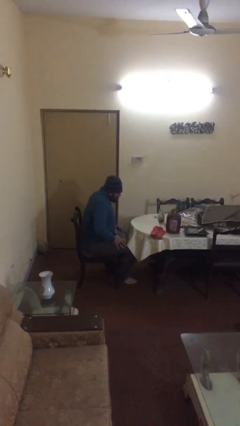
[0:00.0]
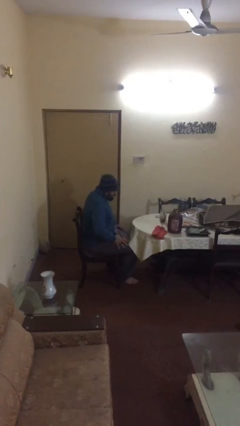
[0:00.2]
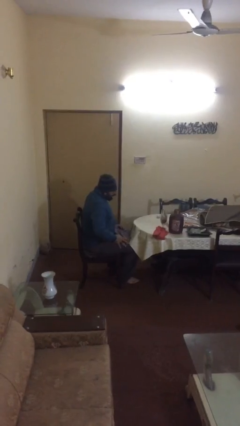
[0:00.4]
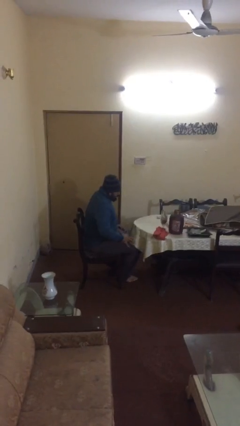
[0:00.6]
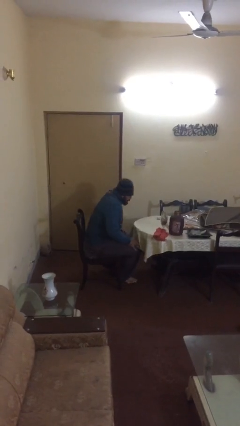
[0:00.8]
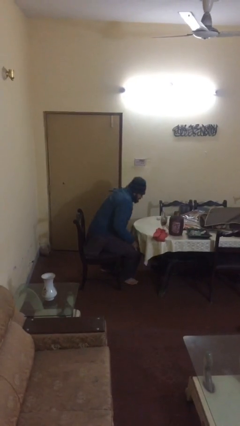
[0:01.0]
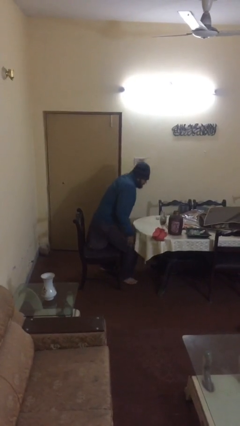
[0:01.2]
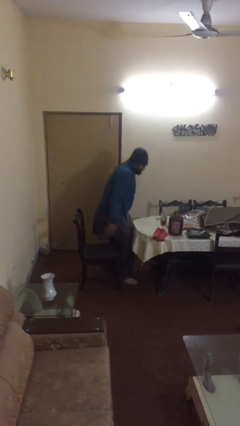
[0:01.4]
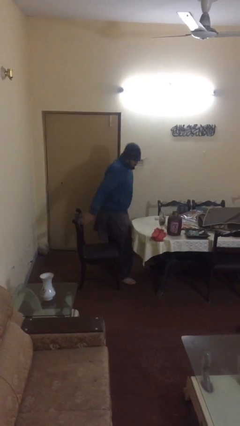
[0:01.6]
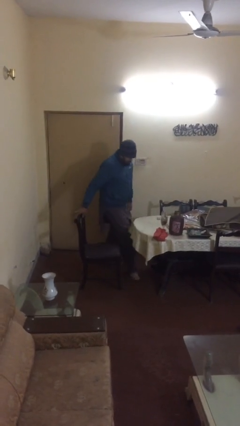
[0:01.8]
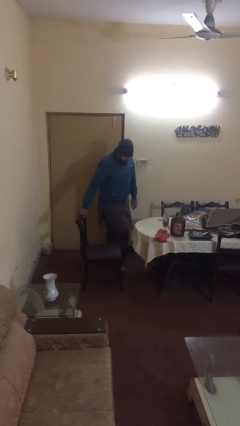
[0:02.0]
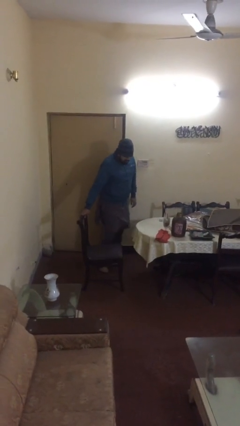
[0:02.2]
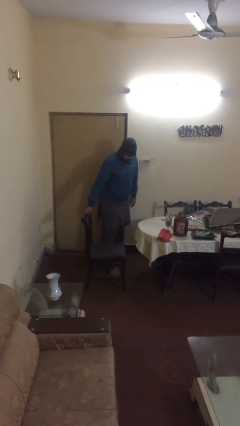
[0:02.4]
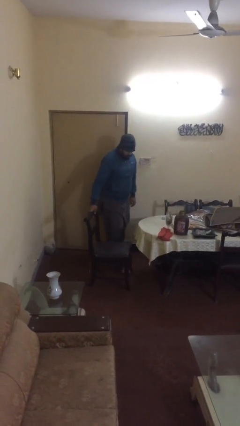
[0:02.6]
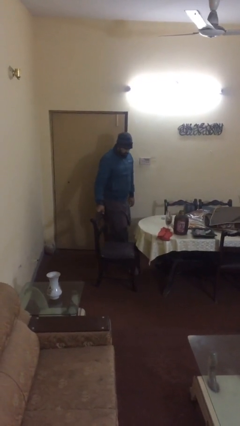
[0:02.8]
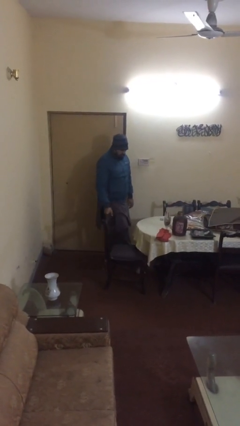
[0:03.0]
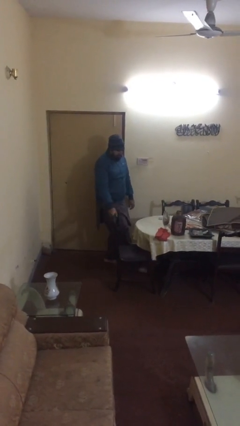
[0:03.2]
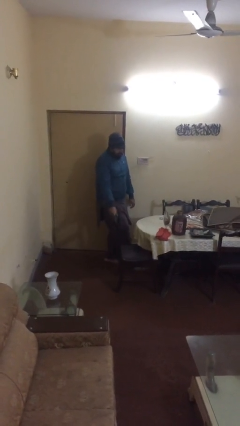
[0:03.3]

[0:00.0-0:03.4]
person stands up

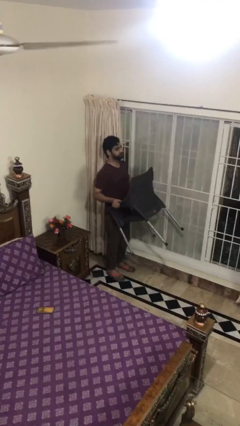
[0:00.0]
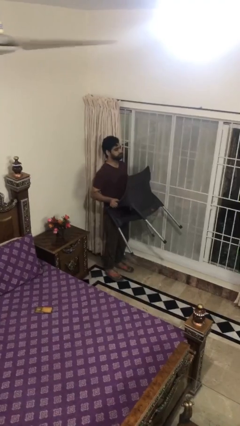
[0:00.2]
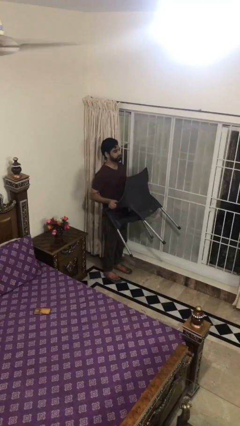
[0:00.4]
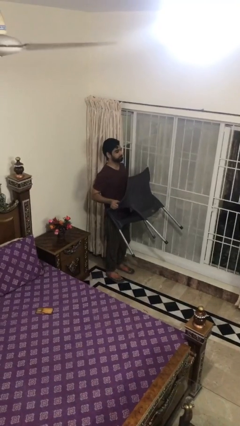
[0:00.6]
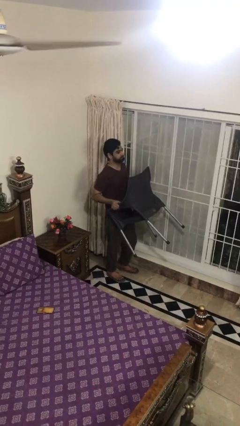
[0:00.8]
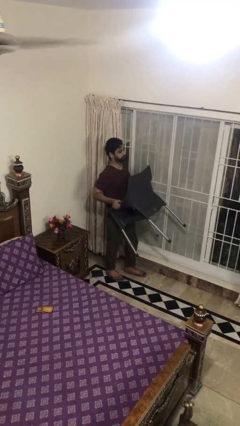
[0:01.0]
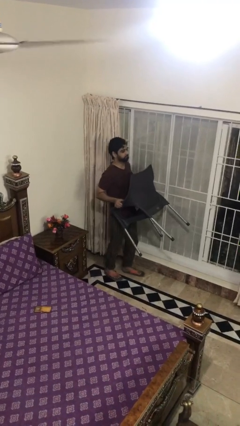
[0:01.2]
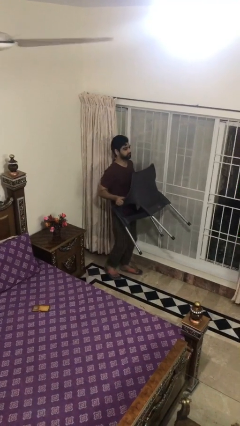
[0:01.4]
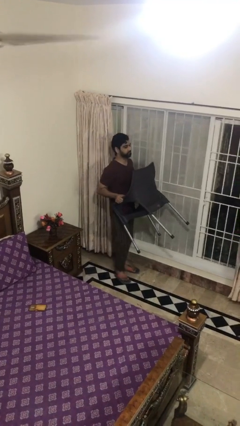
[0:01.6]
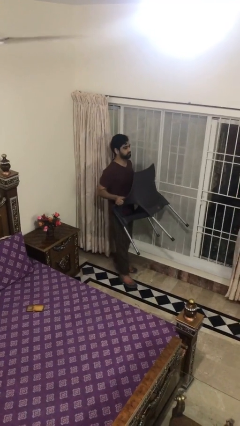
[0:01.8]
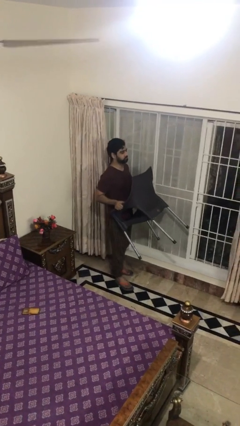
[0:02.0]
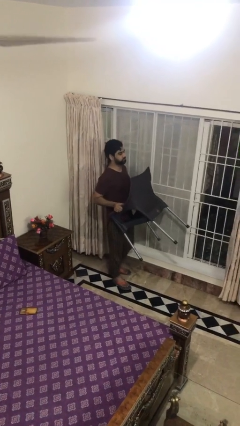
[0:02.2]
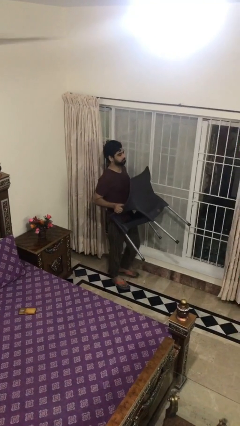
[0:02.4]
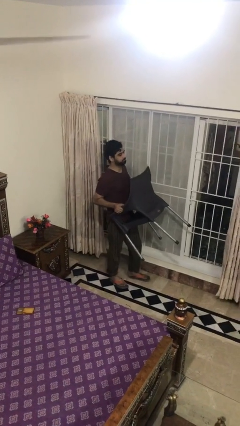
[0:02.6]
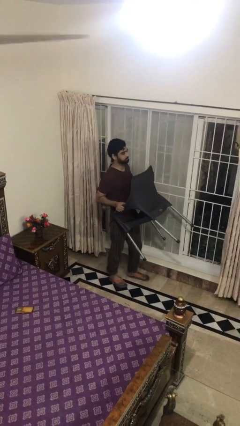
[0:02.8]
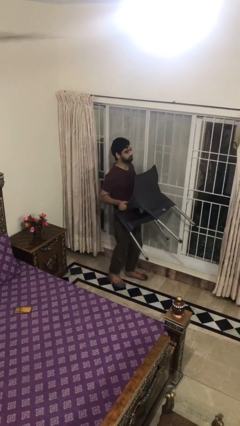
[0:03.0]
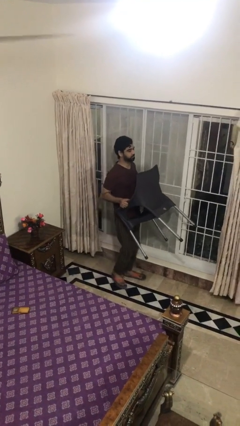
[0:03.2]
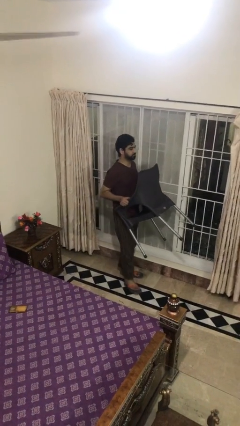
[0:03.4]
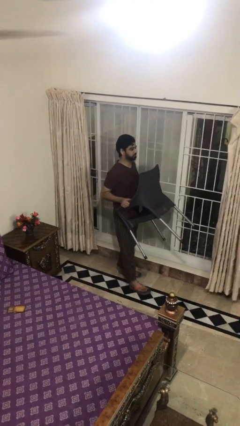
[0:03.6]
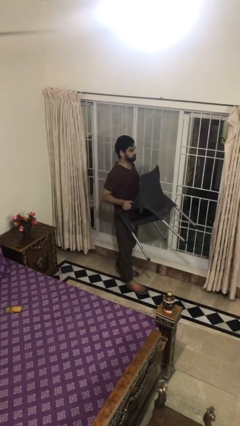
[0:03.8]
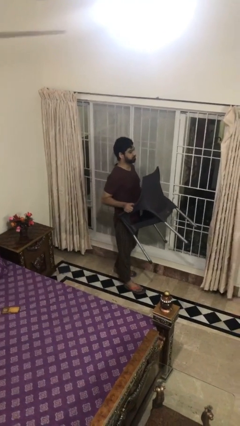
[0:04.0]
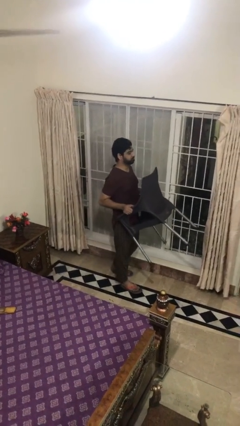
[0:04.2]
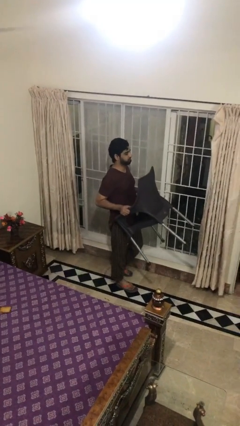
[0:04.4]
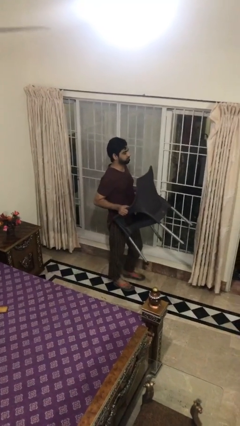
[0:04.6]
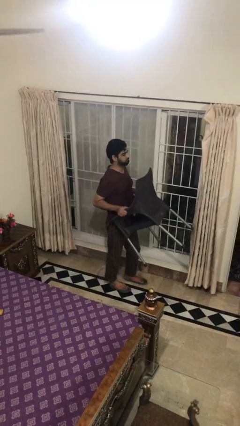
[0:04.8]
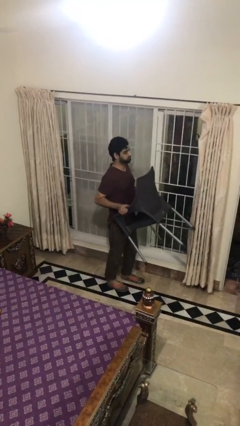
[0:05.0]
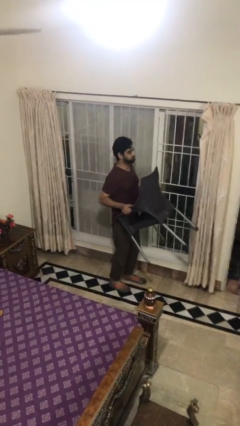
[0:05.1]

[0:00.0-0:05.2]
person carries heavy object

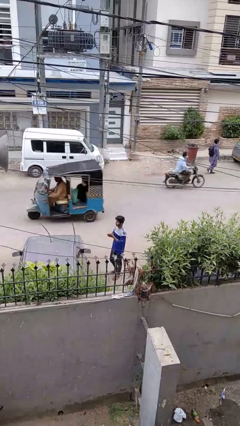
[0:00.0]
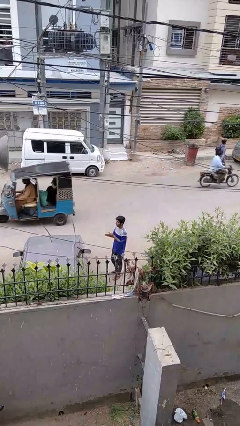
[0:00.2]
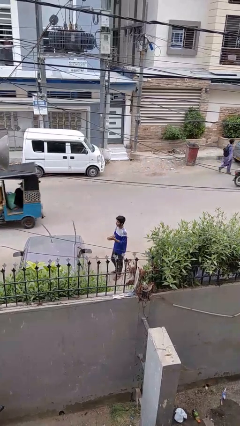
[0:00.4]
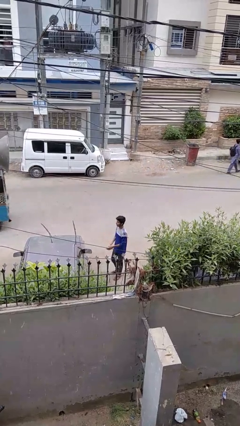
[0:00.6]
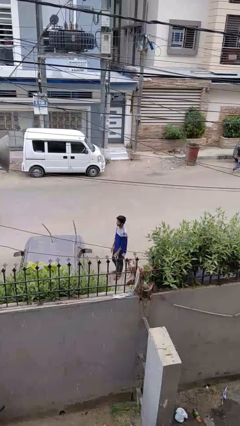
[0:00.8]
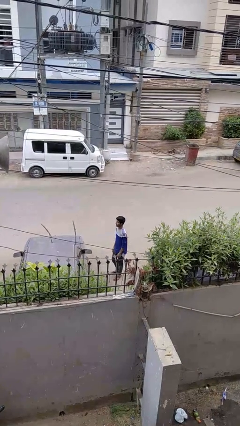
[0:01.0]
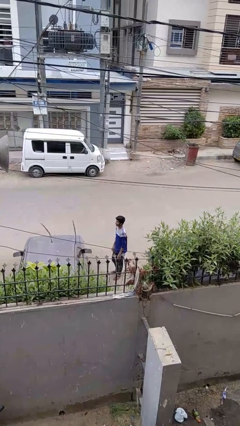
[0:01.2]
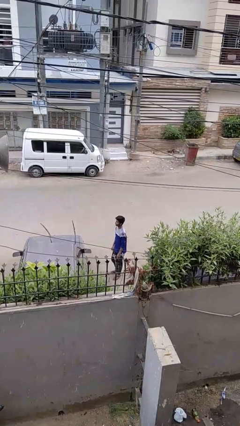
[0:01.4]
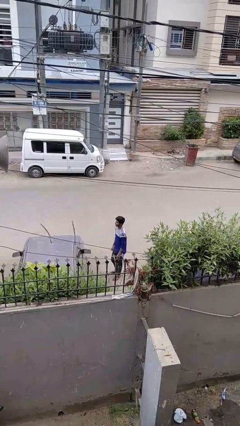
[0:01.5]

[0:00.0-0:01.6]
person blows into hands

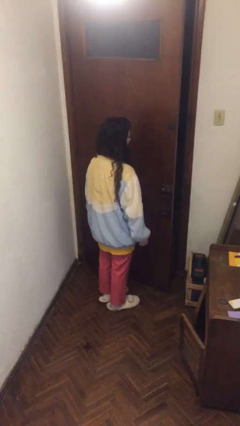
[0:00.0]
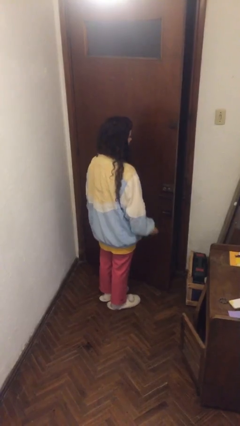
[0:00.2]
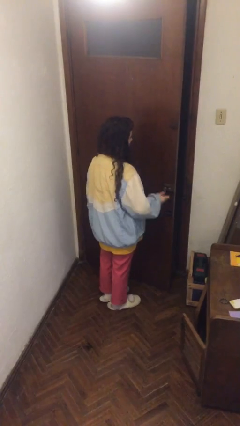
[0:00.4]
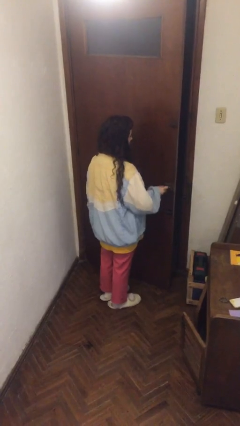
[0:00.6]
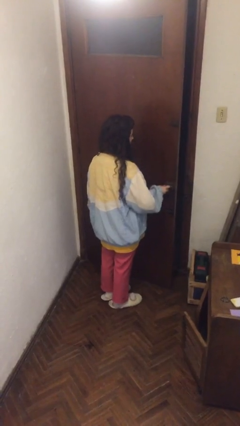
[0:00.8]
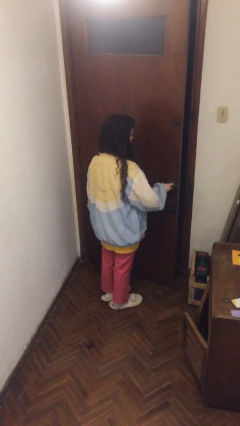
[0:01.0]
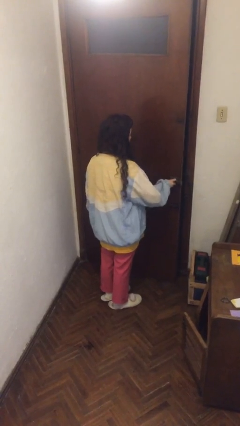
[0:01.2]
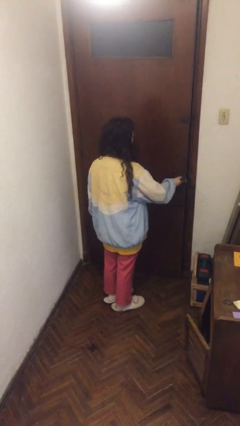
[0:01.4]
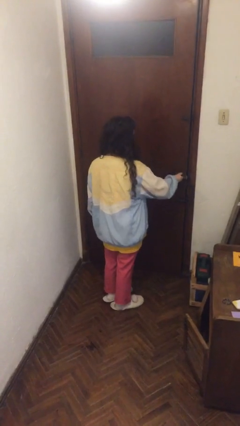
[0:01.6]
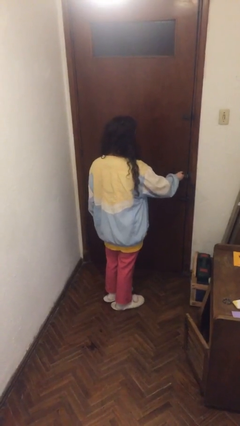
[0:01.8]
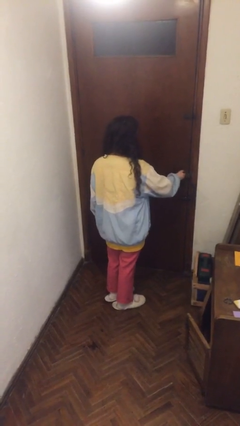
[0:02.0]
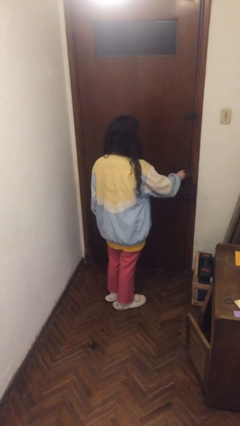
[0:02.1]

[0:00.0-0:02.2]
person closes facility door

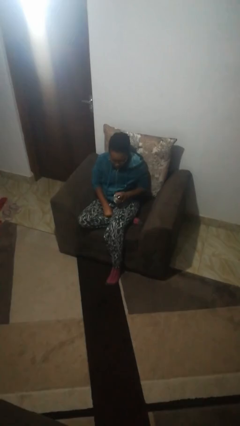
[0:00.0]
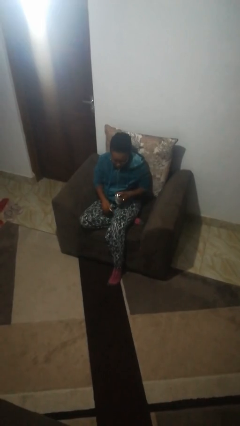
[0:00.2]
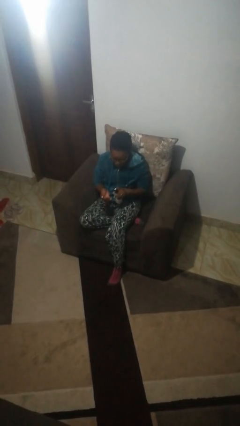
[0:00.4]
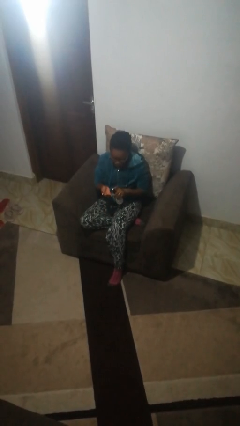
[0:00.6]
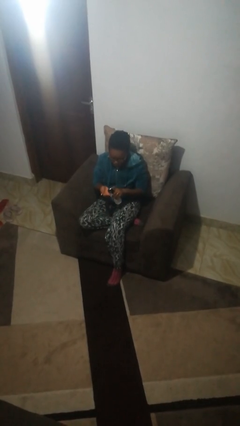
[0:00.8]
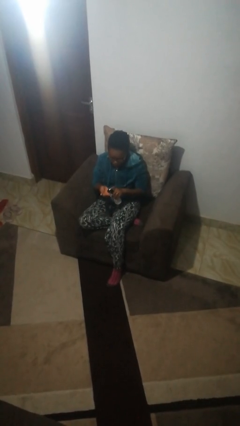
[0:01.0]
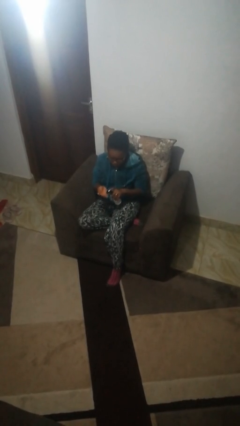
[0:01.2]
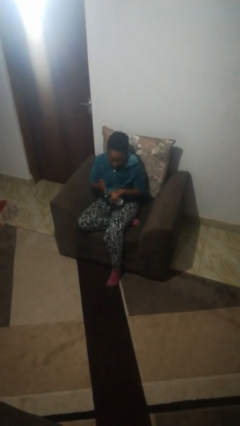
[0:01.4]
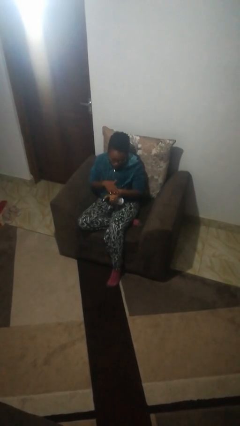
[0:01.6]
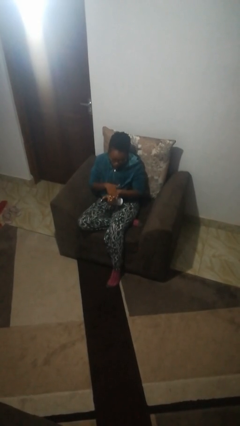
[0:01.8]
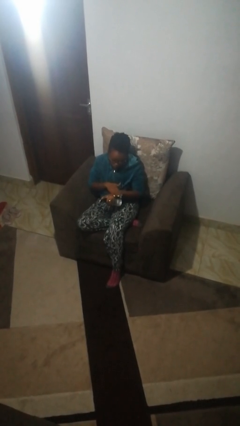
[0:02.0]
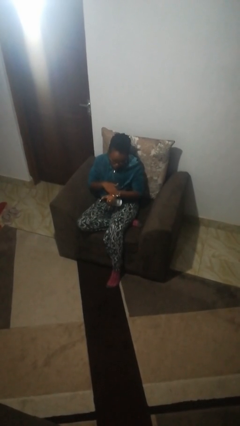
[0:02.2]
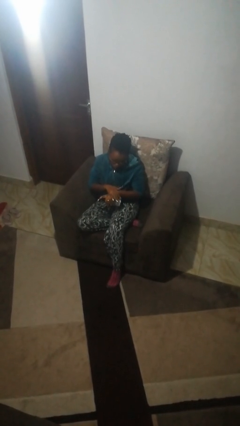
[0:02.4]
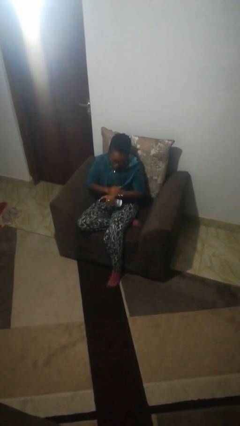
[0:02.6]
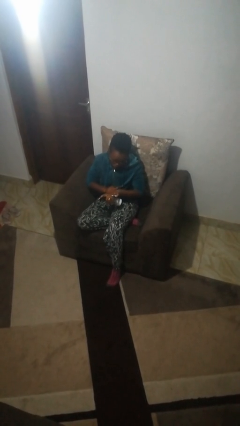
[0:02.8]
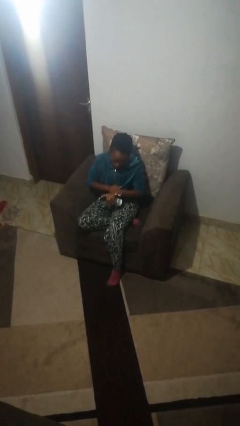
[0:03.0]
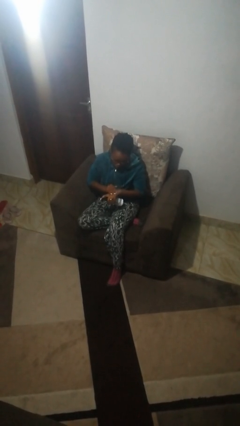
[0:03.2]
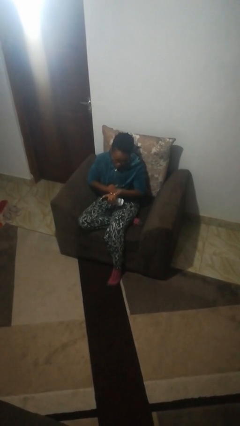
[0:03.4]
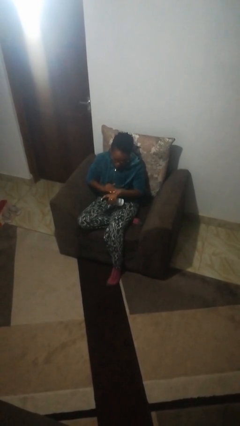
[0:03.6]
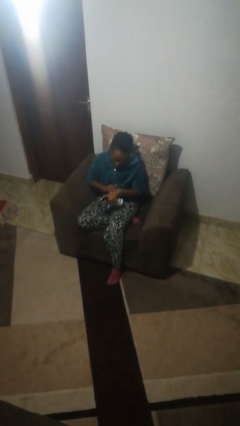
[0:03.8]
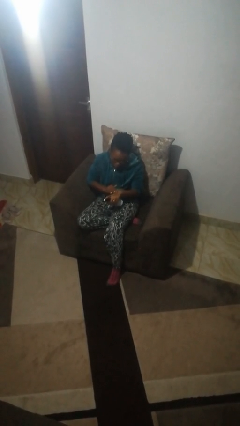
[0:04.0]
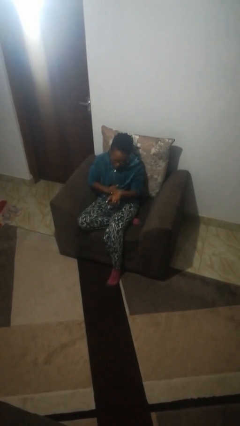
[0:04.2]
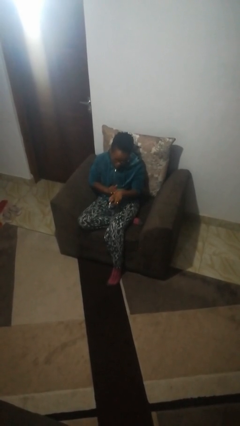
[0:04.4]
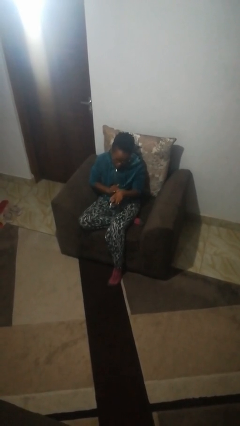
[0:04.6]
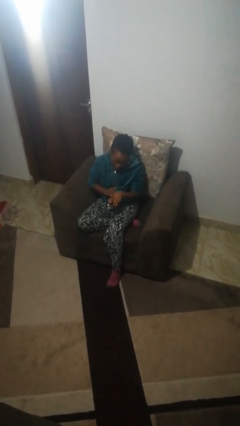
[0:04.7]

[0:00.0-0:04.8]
person applies sunscreen

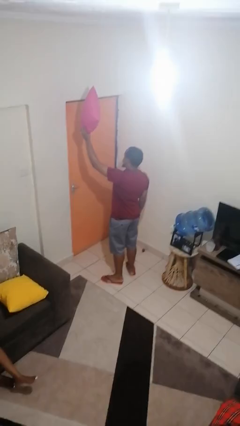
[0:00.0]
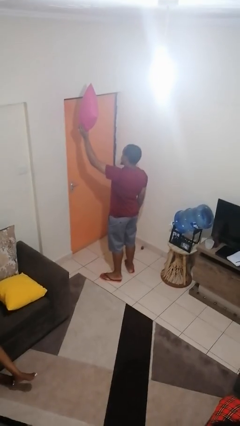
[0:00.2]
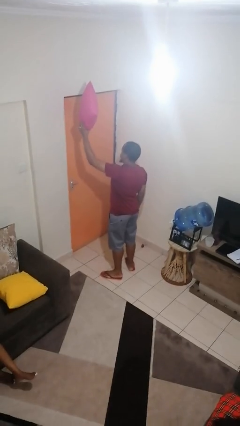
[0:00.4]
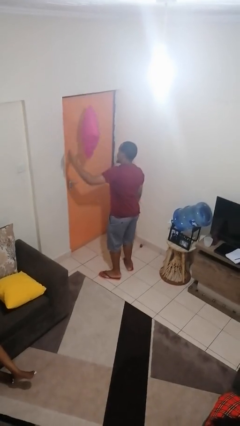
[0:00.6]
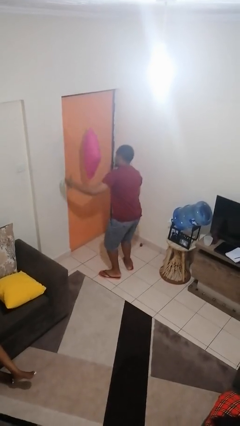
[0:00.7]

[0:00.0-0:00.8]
person drops object
